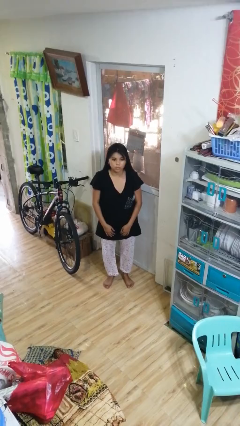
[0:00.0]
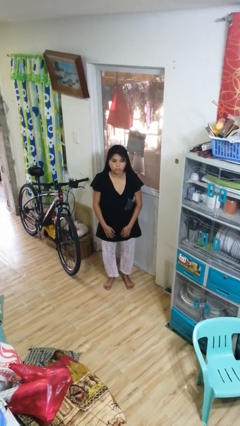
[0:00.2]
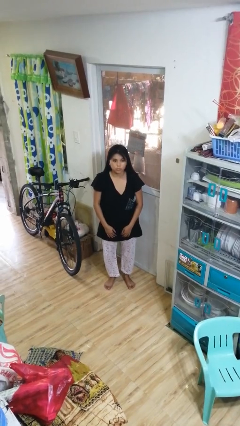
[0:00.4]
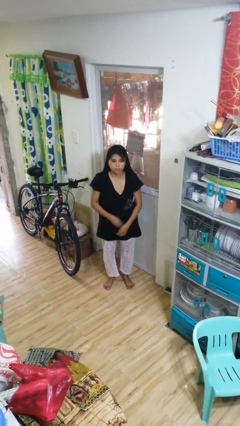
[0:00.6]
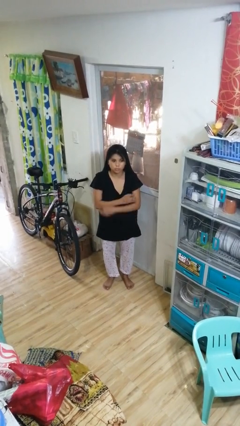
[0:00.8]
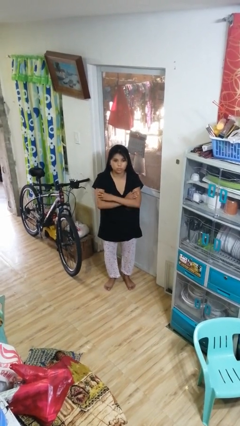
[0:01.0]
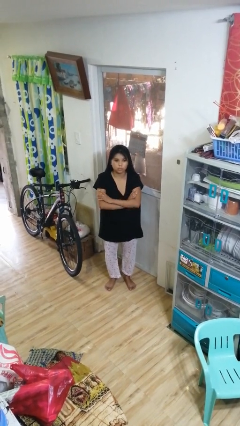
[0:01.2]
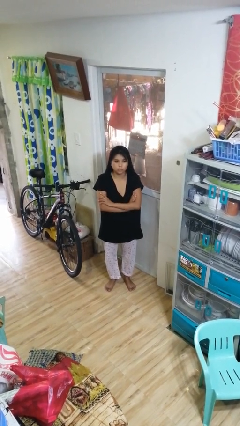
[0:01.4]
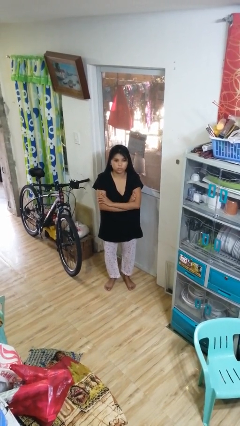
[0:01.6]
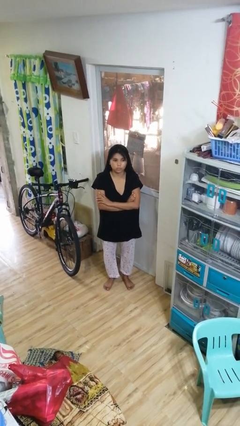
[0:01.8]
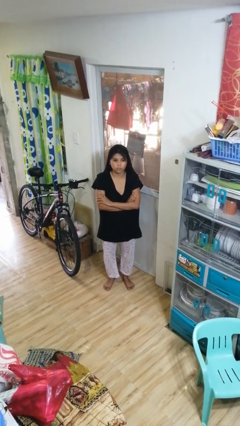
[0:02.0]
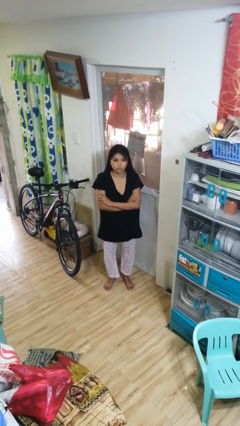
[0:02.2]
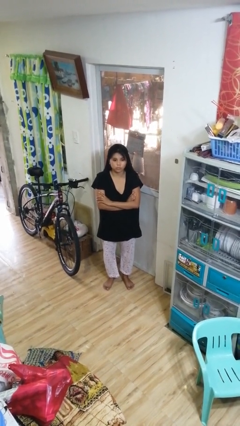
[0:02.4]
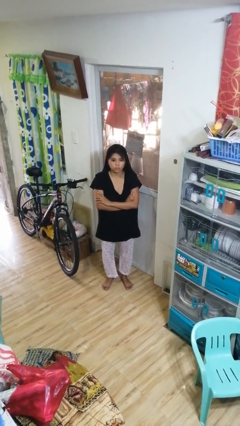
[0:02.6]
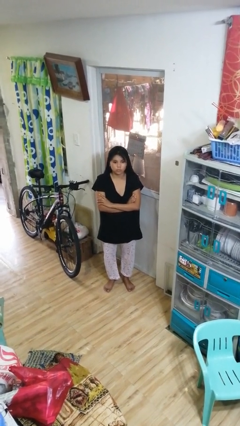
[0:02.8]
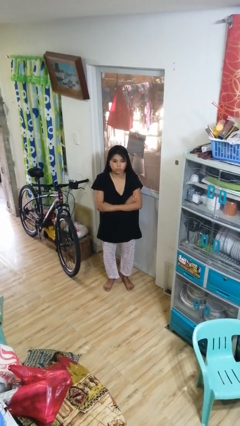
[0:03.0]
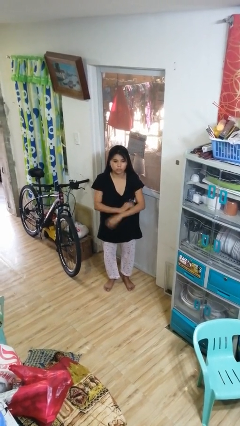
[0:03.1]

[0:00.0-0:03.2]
person crosses arms

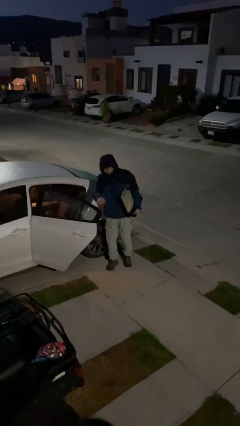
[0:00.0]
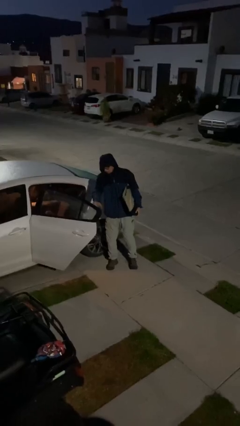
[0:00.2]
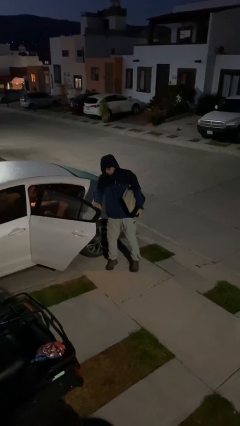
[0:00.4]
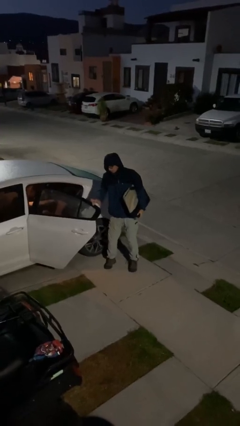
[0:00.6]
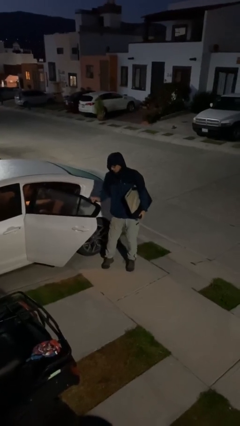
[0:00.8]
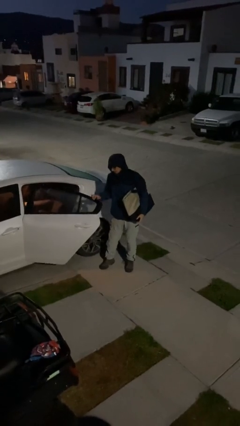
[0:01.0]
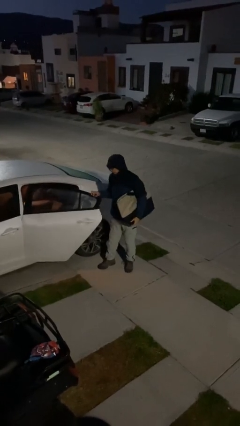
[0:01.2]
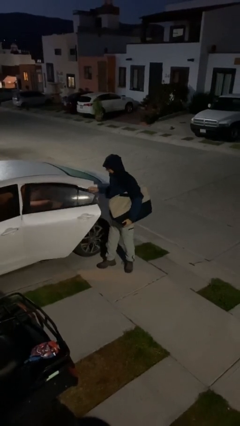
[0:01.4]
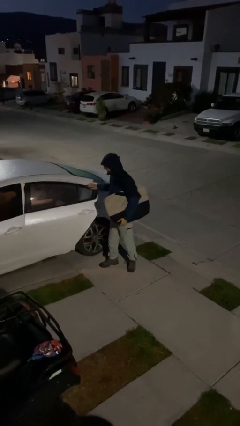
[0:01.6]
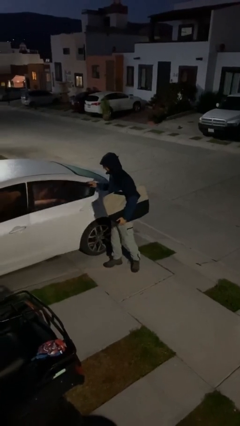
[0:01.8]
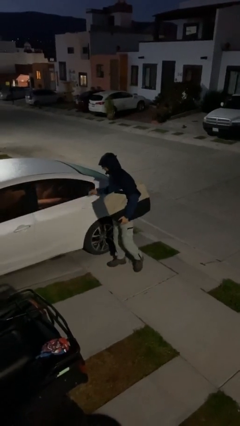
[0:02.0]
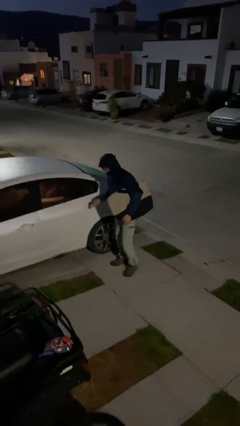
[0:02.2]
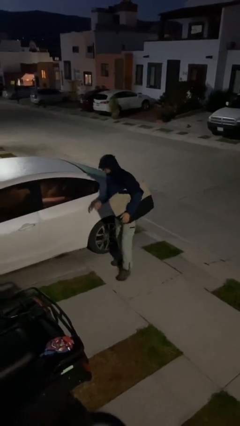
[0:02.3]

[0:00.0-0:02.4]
person closes car door

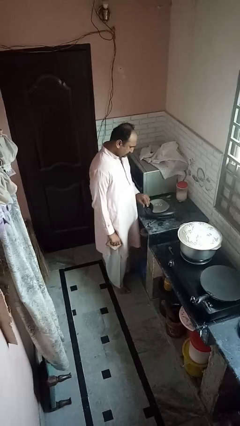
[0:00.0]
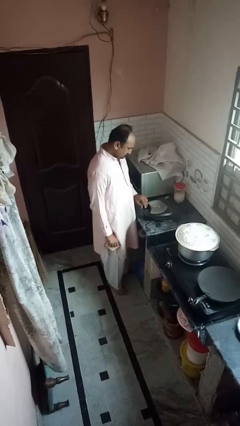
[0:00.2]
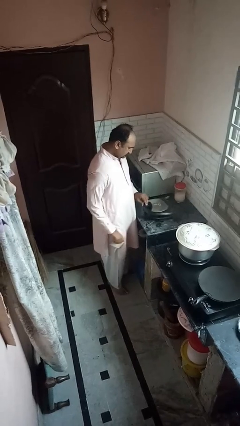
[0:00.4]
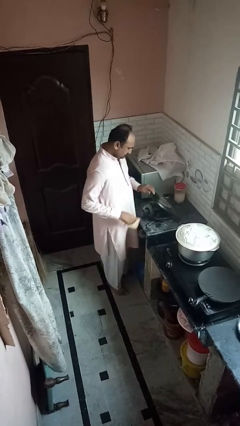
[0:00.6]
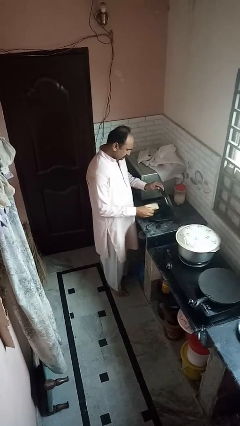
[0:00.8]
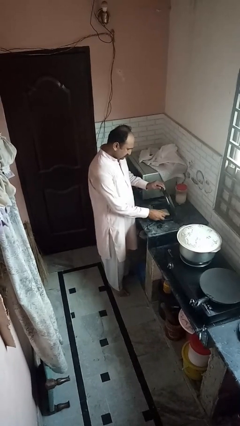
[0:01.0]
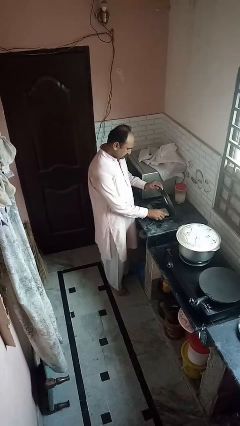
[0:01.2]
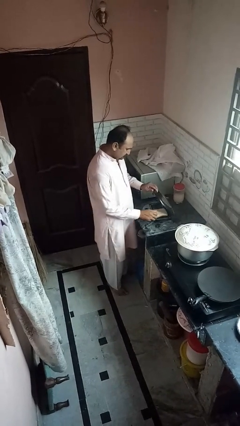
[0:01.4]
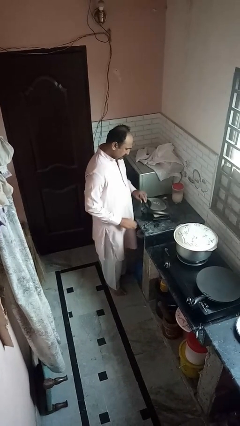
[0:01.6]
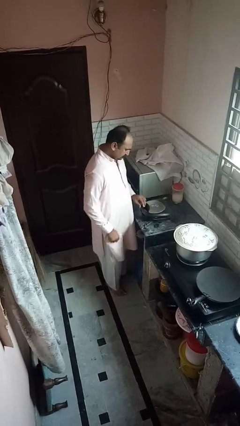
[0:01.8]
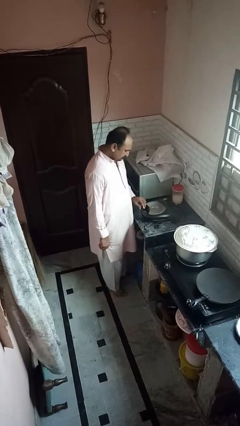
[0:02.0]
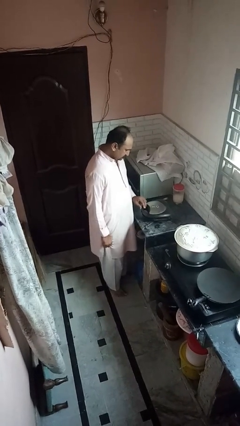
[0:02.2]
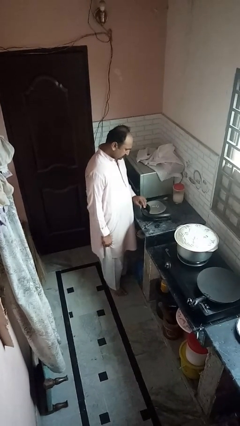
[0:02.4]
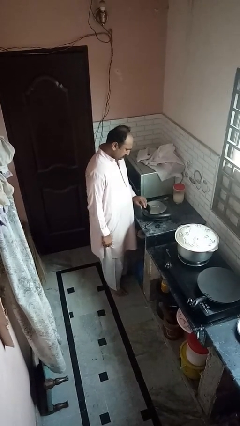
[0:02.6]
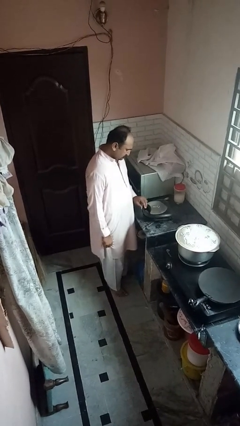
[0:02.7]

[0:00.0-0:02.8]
person puts object into toaster

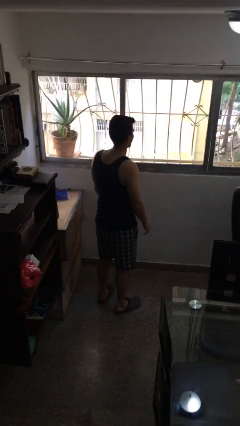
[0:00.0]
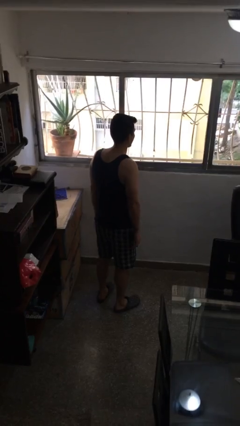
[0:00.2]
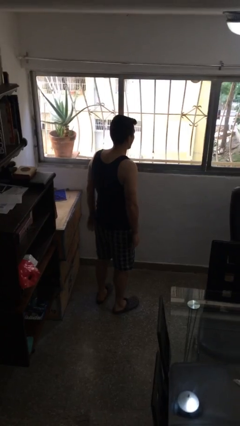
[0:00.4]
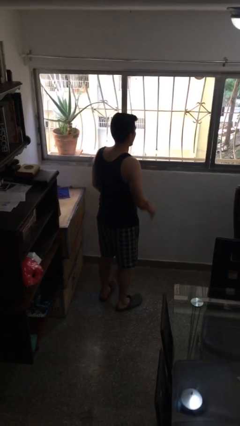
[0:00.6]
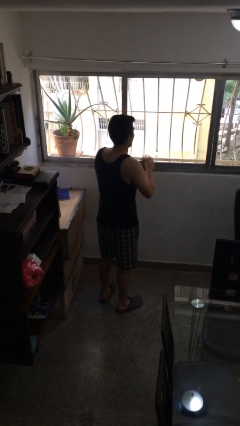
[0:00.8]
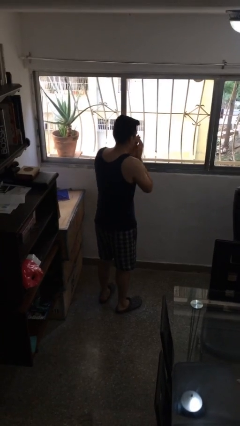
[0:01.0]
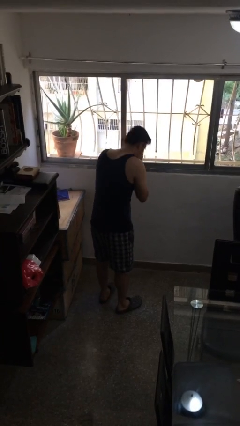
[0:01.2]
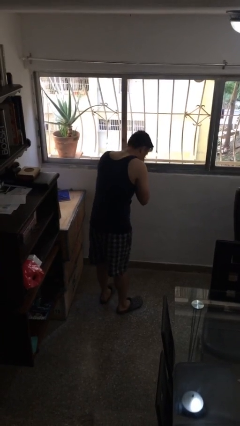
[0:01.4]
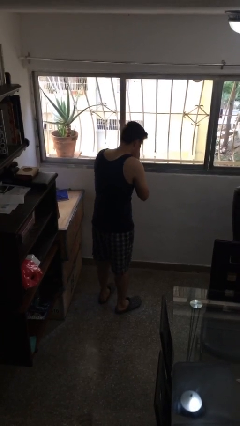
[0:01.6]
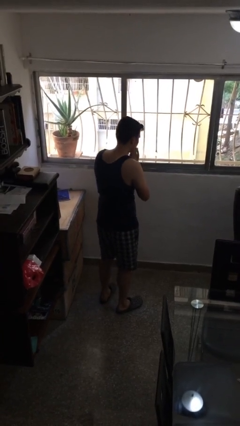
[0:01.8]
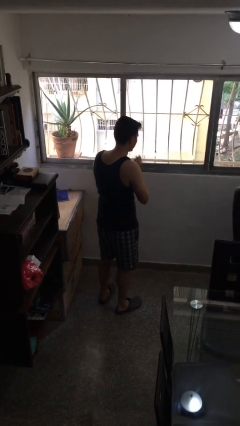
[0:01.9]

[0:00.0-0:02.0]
person sneezes into hand

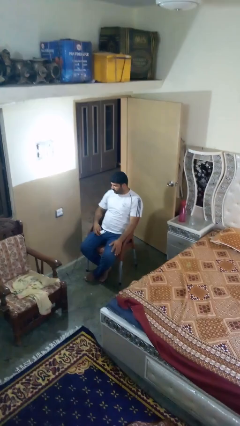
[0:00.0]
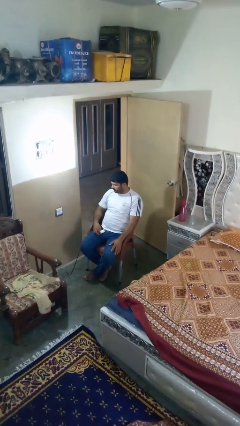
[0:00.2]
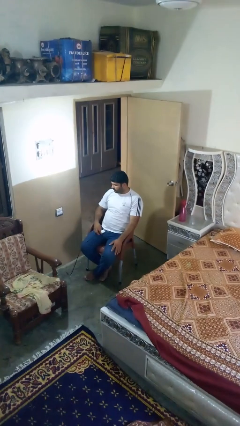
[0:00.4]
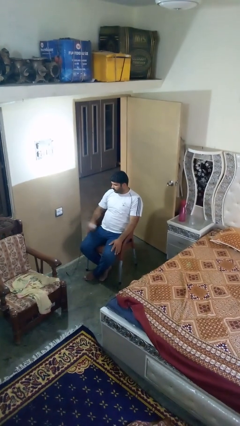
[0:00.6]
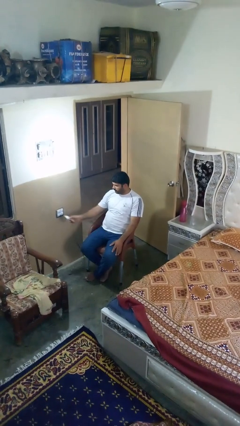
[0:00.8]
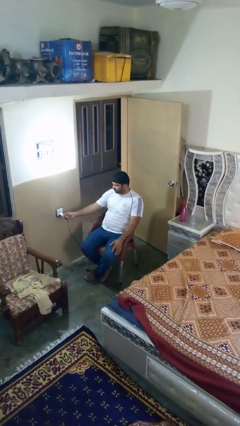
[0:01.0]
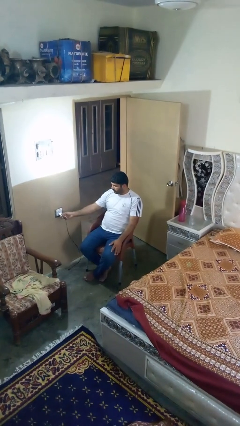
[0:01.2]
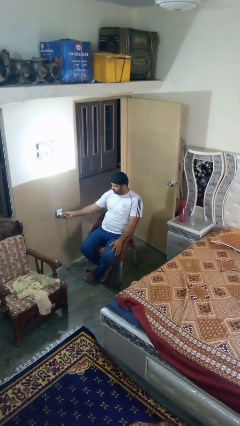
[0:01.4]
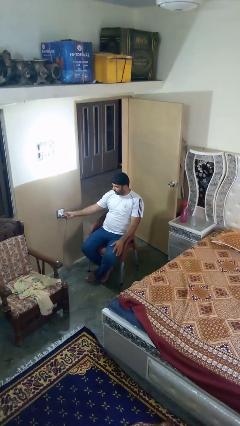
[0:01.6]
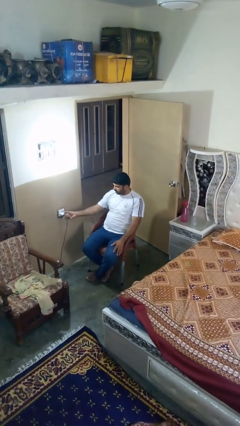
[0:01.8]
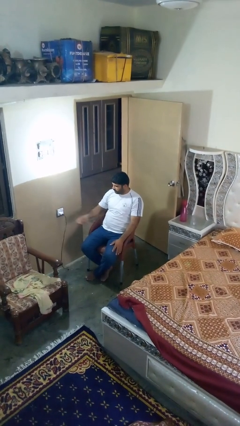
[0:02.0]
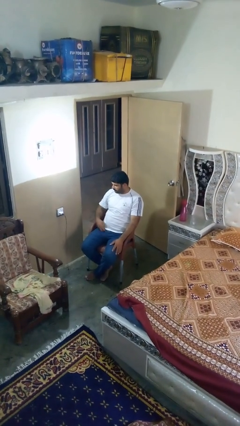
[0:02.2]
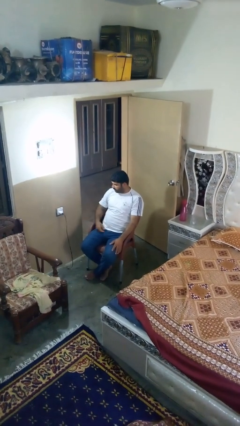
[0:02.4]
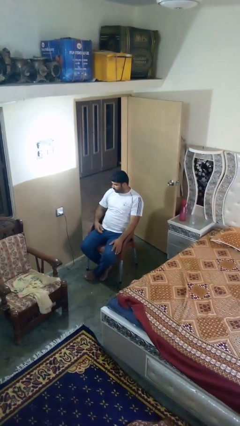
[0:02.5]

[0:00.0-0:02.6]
person plugs into electrical socket

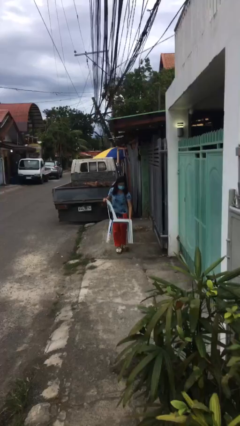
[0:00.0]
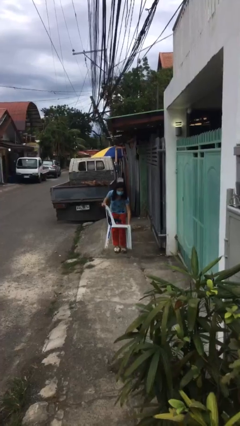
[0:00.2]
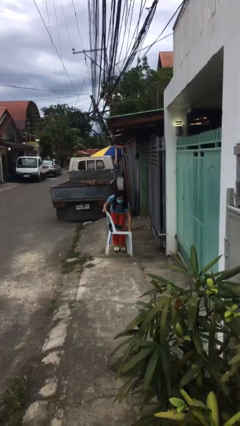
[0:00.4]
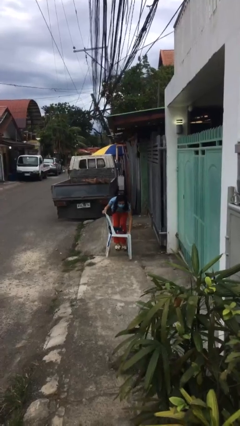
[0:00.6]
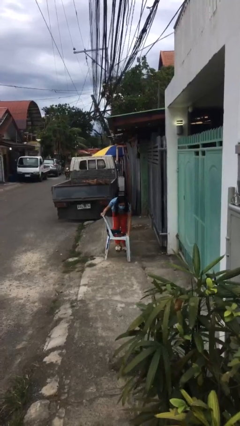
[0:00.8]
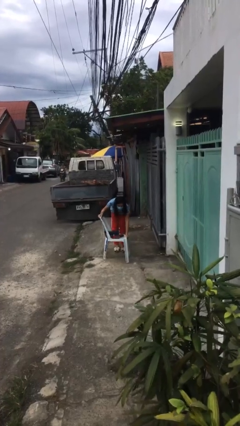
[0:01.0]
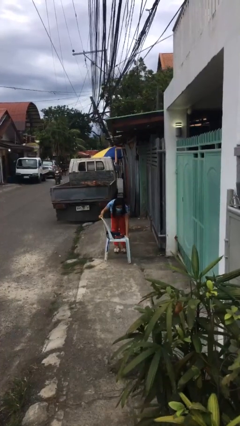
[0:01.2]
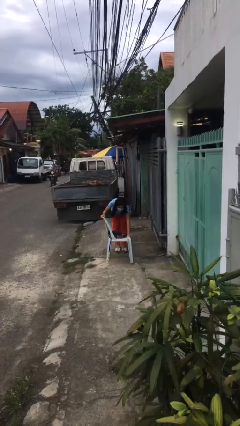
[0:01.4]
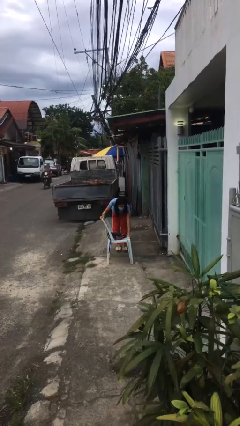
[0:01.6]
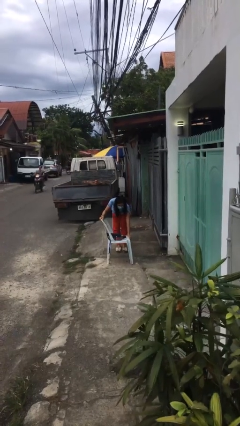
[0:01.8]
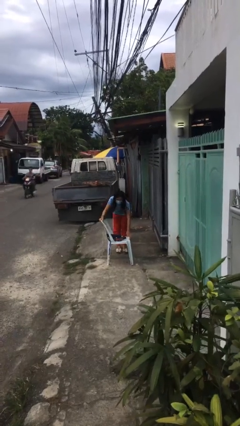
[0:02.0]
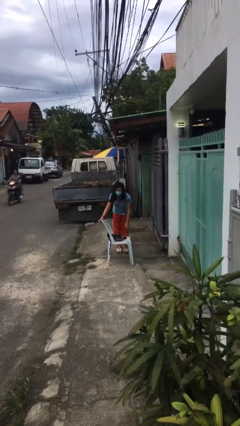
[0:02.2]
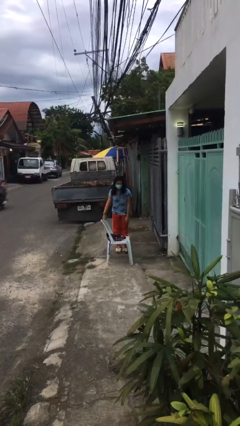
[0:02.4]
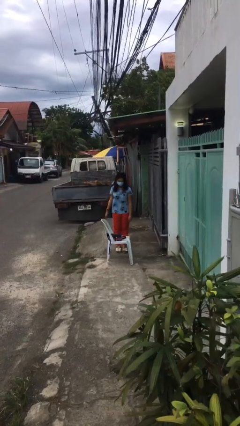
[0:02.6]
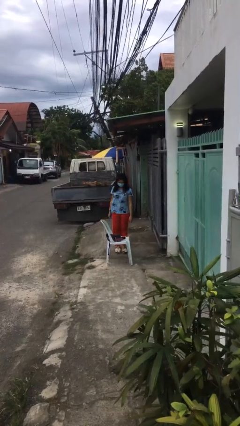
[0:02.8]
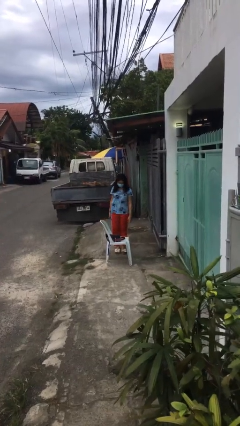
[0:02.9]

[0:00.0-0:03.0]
person puts down object on floor

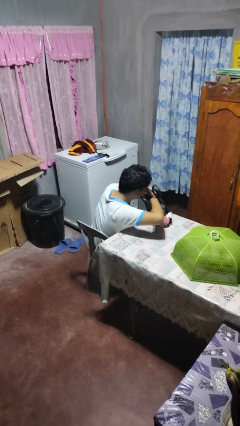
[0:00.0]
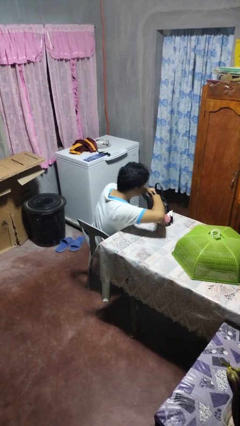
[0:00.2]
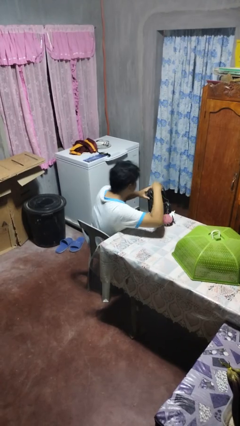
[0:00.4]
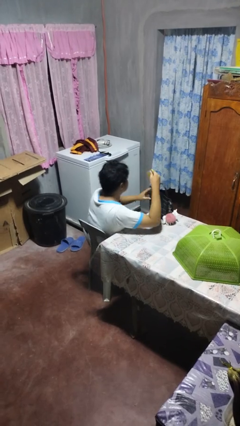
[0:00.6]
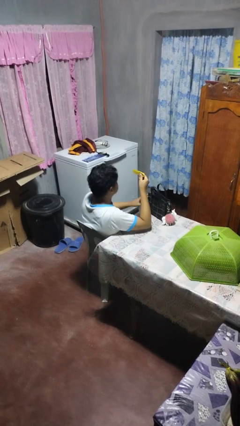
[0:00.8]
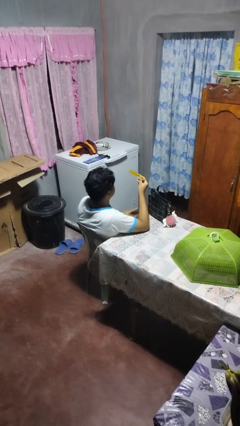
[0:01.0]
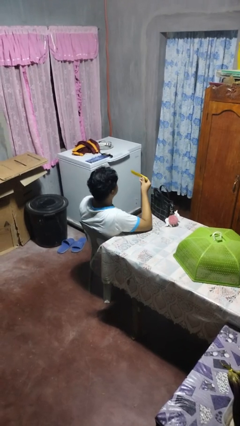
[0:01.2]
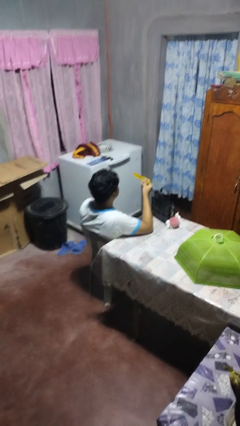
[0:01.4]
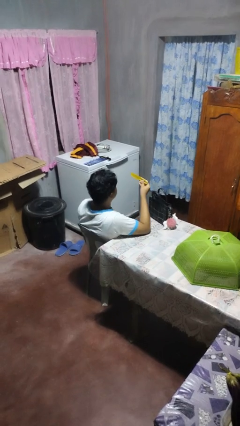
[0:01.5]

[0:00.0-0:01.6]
person takes object from purse

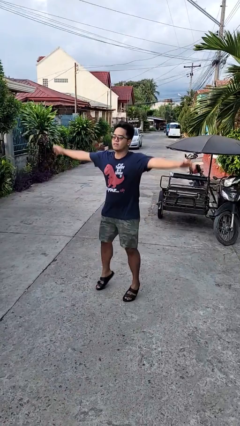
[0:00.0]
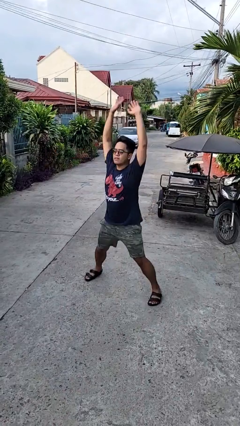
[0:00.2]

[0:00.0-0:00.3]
person exercises with jumping jacks
